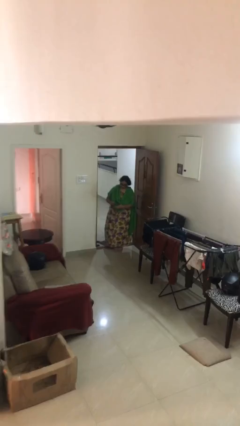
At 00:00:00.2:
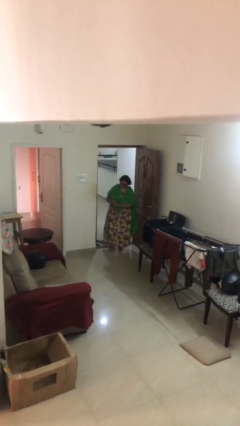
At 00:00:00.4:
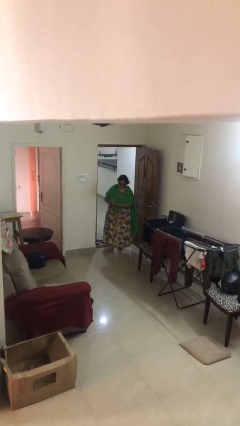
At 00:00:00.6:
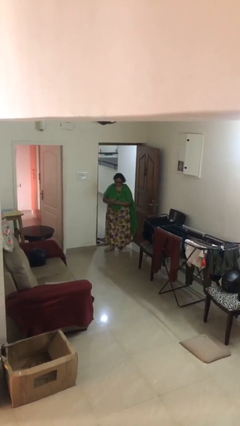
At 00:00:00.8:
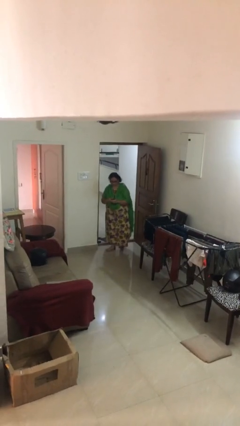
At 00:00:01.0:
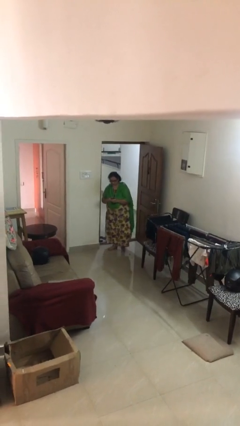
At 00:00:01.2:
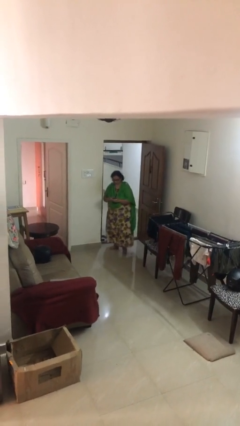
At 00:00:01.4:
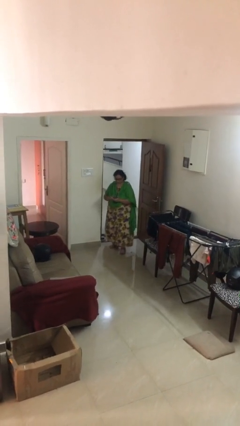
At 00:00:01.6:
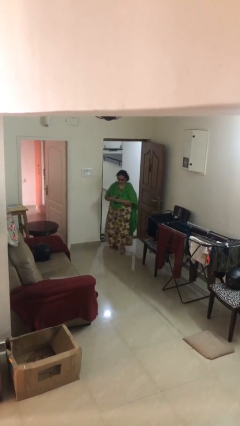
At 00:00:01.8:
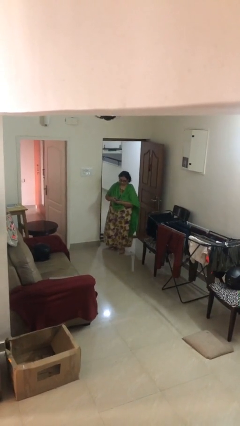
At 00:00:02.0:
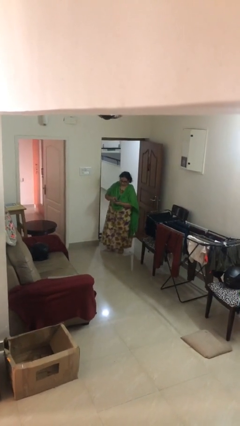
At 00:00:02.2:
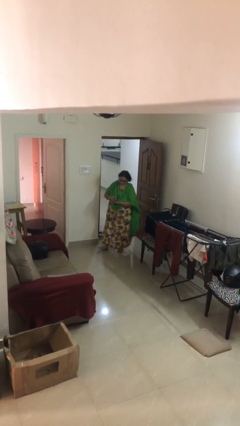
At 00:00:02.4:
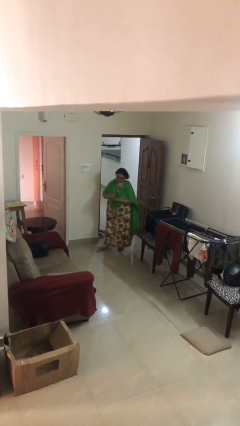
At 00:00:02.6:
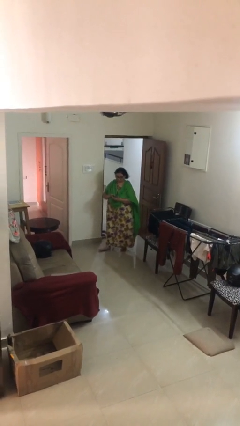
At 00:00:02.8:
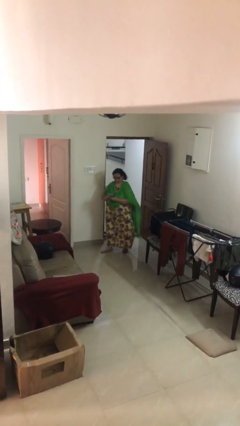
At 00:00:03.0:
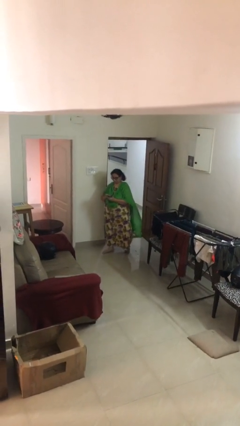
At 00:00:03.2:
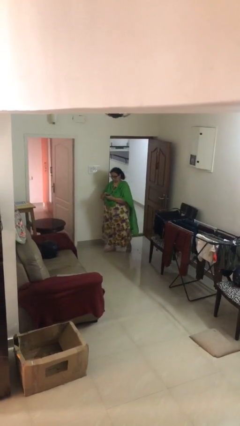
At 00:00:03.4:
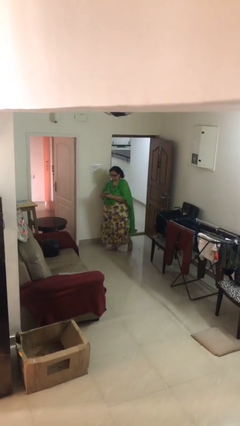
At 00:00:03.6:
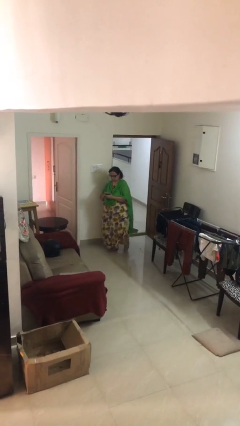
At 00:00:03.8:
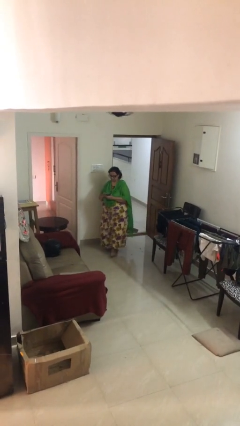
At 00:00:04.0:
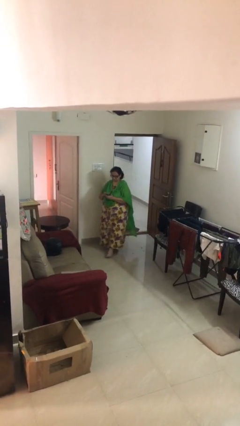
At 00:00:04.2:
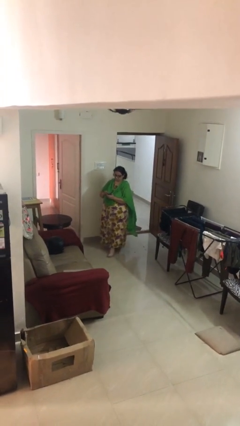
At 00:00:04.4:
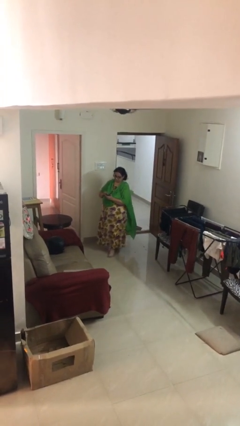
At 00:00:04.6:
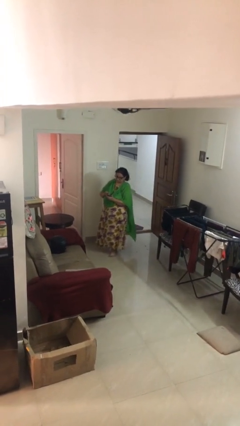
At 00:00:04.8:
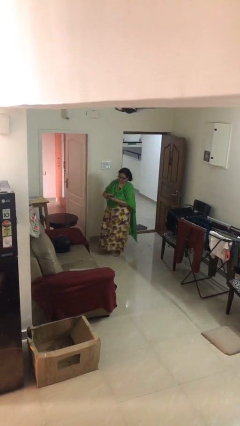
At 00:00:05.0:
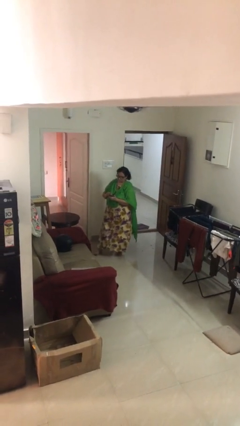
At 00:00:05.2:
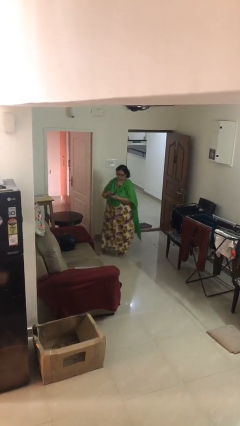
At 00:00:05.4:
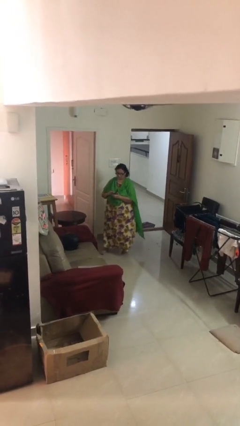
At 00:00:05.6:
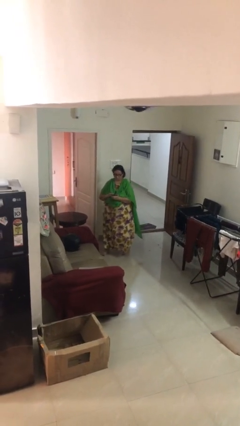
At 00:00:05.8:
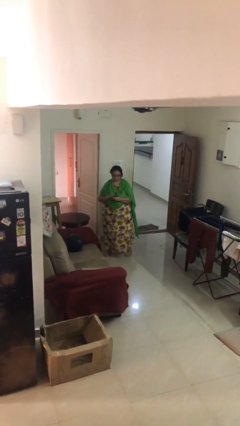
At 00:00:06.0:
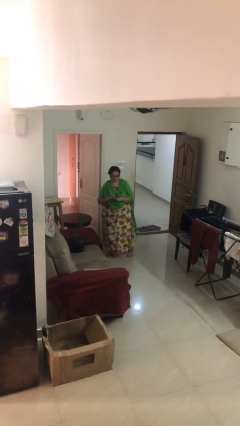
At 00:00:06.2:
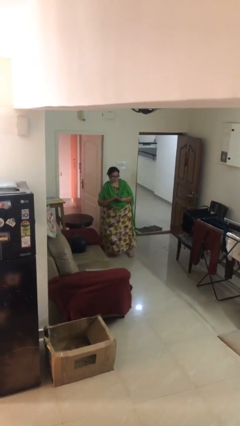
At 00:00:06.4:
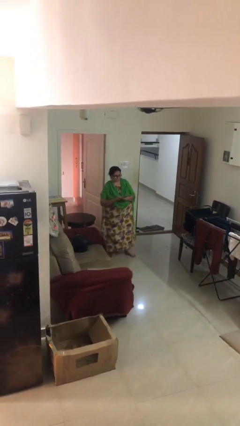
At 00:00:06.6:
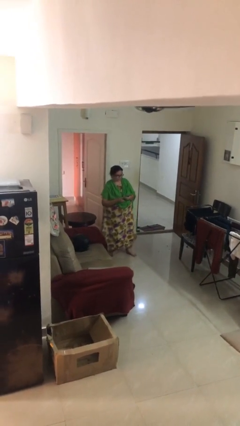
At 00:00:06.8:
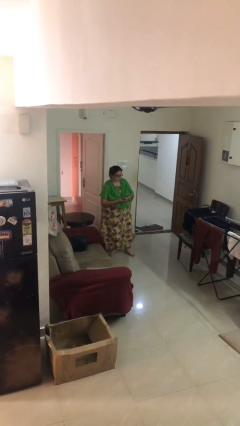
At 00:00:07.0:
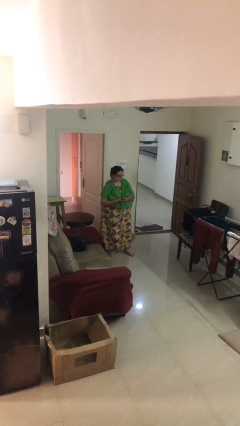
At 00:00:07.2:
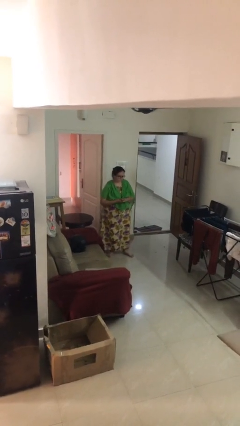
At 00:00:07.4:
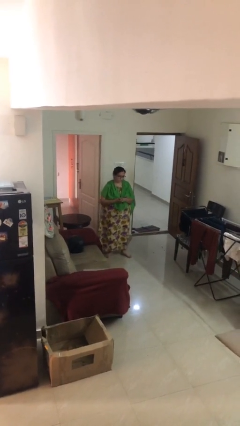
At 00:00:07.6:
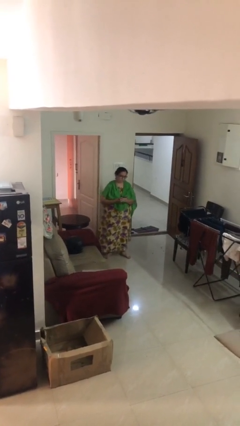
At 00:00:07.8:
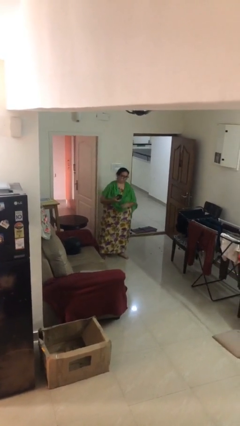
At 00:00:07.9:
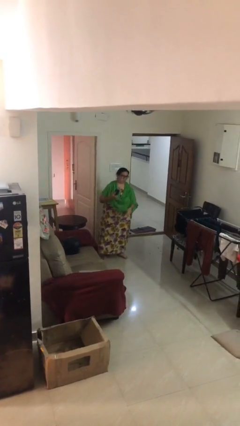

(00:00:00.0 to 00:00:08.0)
person texts on phone

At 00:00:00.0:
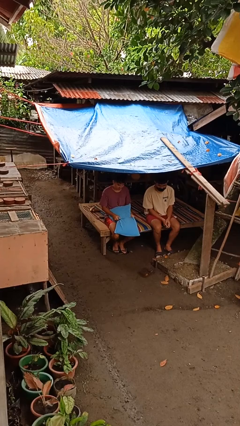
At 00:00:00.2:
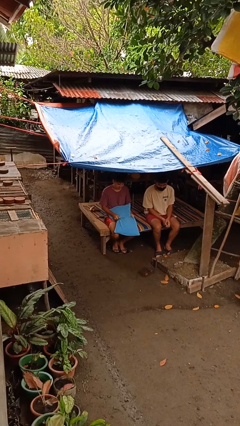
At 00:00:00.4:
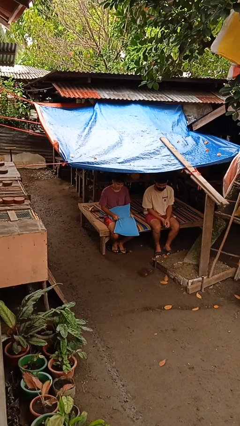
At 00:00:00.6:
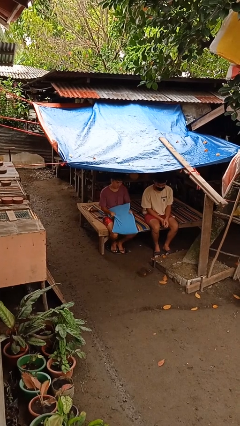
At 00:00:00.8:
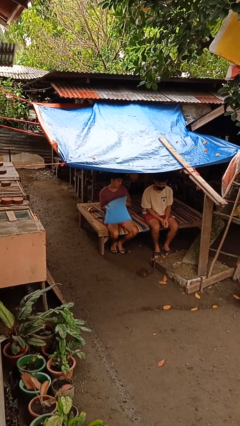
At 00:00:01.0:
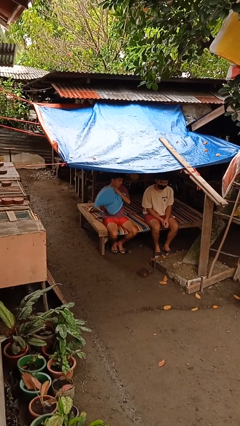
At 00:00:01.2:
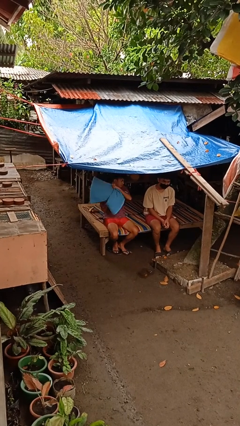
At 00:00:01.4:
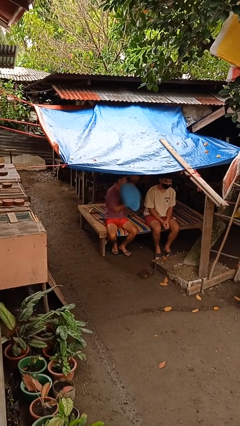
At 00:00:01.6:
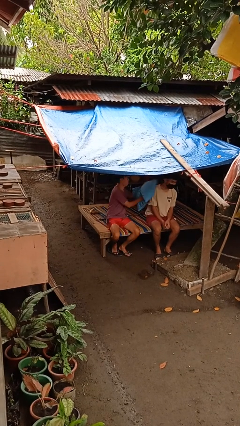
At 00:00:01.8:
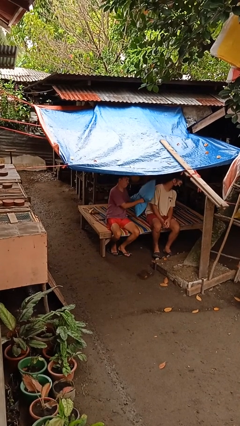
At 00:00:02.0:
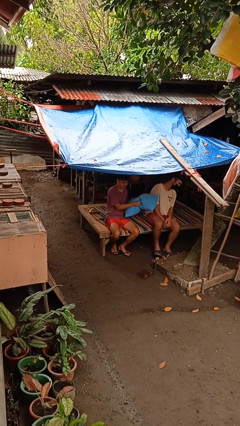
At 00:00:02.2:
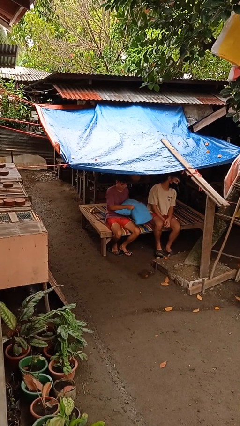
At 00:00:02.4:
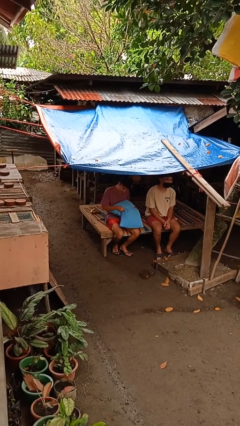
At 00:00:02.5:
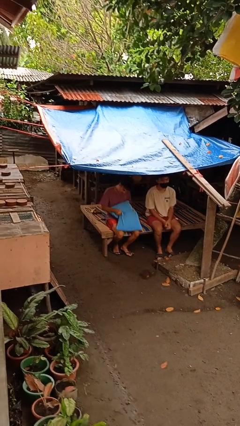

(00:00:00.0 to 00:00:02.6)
person hits person with pillow

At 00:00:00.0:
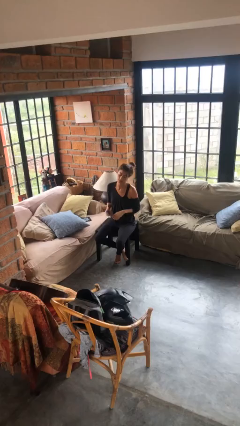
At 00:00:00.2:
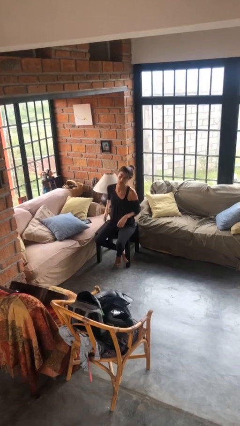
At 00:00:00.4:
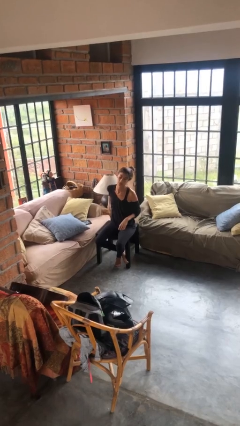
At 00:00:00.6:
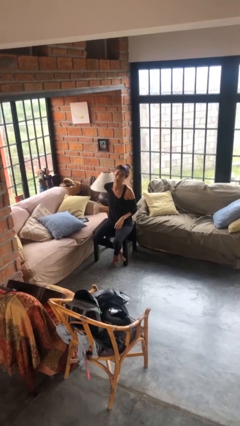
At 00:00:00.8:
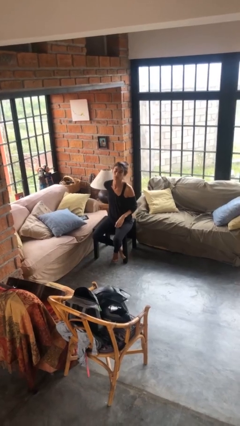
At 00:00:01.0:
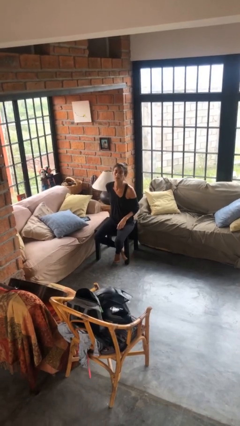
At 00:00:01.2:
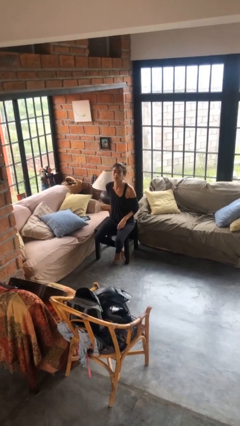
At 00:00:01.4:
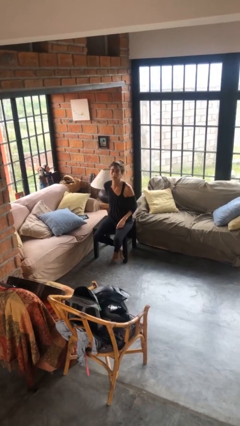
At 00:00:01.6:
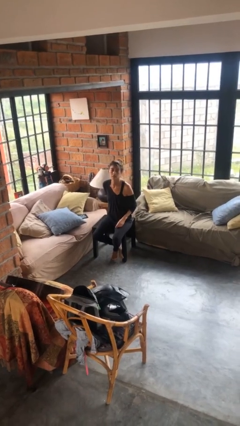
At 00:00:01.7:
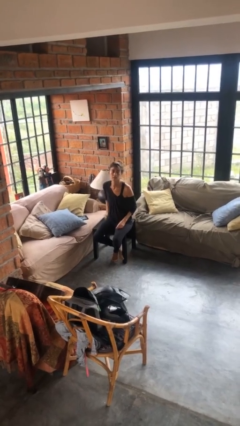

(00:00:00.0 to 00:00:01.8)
person puts phone into pocket

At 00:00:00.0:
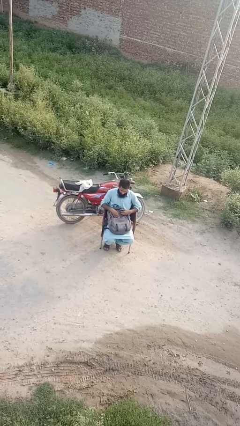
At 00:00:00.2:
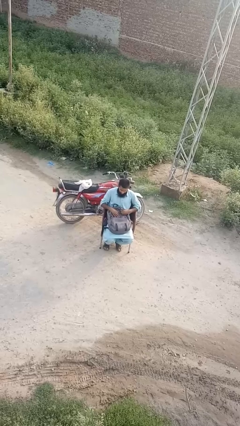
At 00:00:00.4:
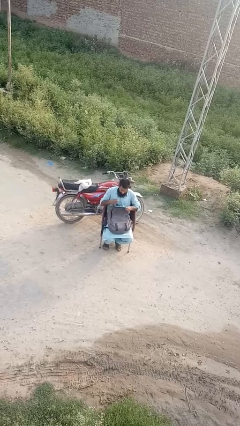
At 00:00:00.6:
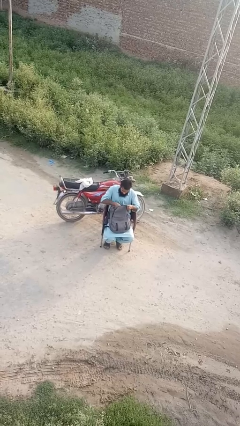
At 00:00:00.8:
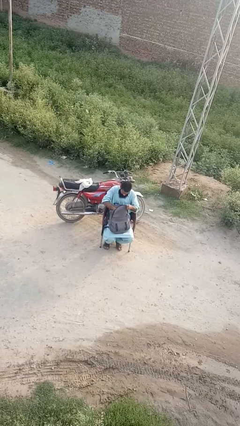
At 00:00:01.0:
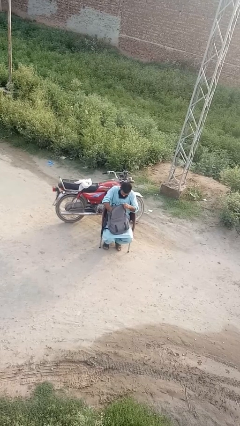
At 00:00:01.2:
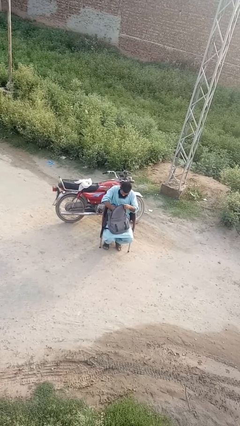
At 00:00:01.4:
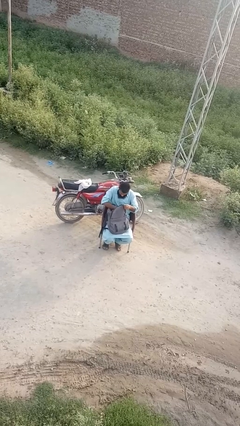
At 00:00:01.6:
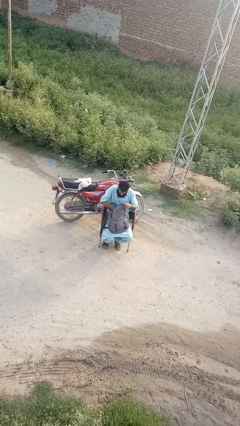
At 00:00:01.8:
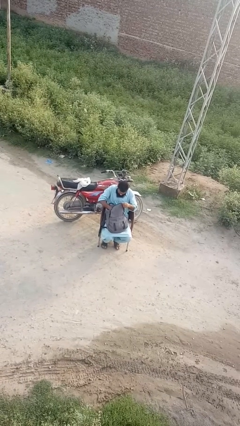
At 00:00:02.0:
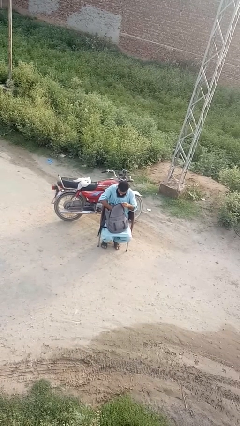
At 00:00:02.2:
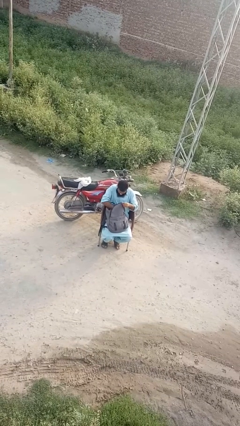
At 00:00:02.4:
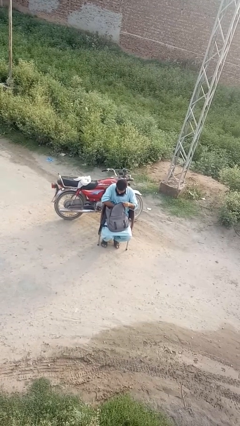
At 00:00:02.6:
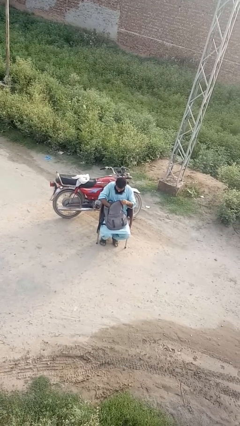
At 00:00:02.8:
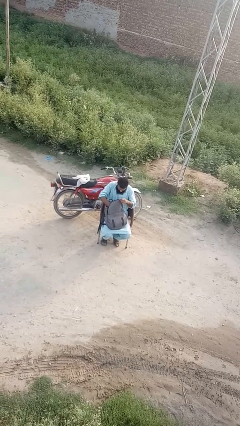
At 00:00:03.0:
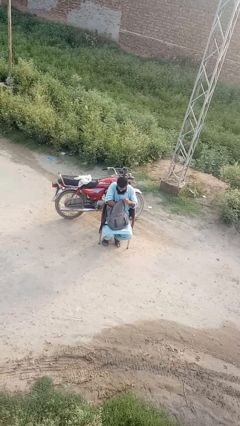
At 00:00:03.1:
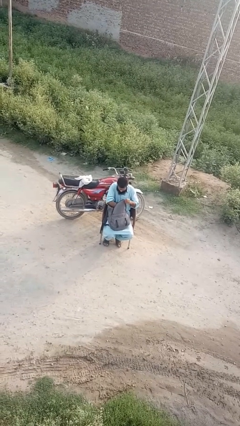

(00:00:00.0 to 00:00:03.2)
person searches in backpack

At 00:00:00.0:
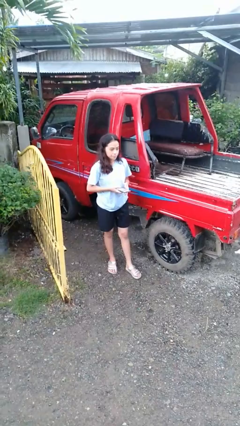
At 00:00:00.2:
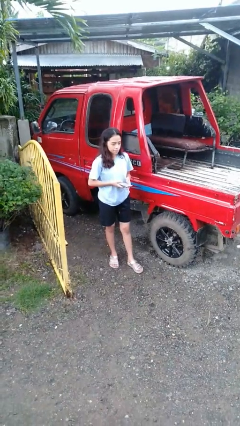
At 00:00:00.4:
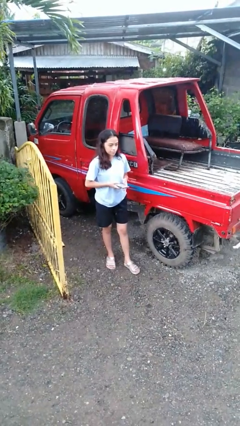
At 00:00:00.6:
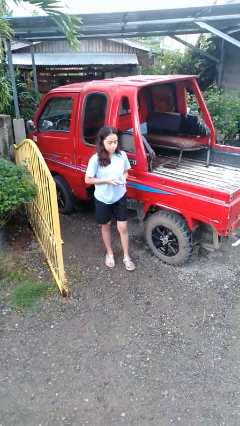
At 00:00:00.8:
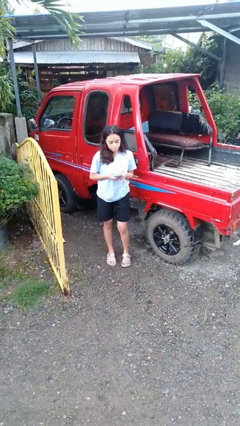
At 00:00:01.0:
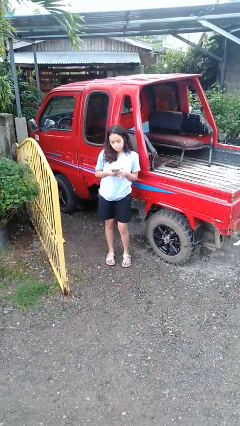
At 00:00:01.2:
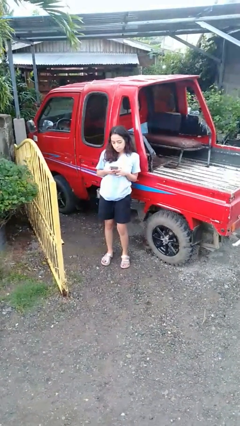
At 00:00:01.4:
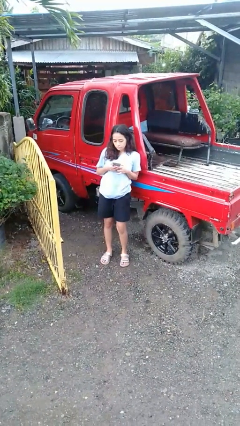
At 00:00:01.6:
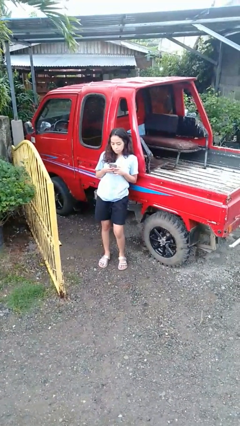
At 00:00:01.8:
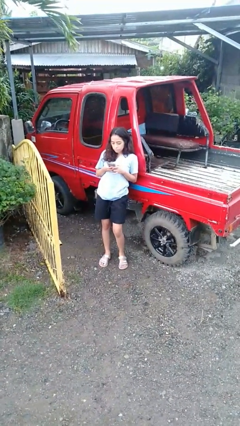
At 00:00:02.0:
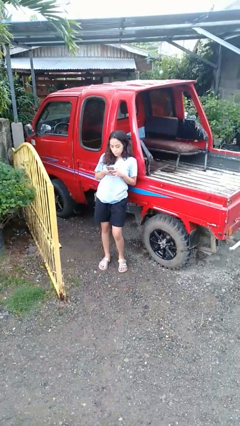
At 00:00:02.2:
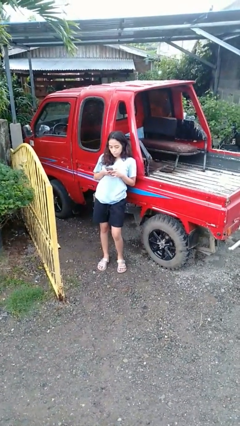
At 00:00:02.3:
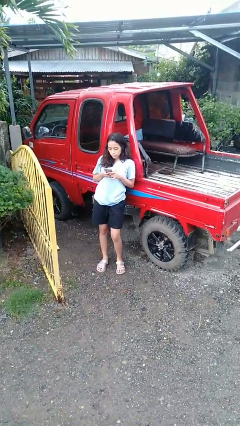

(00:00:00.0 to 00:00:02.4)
person leans against car
